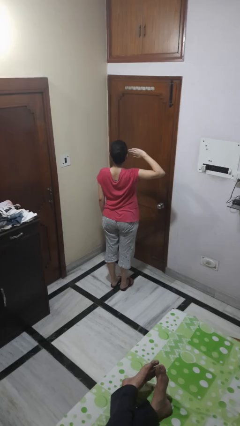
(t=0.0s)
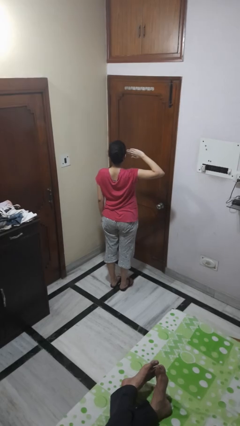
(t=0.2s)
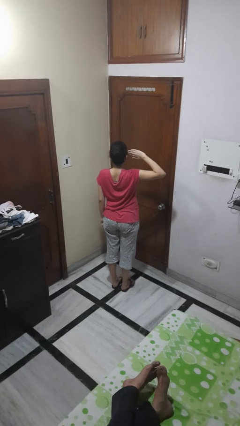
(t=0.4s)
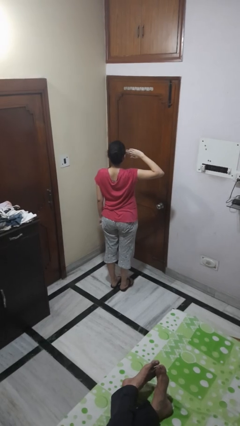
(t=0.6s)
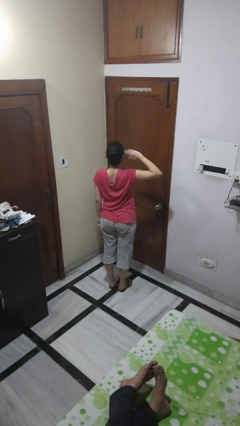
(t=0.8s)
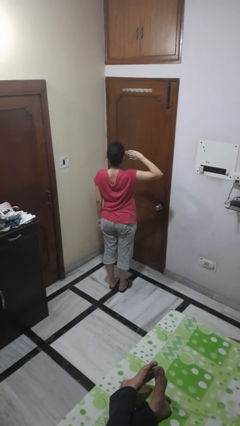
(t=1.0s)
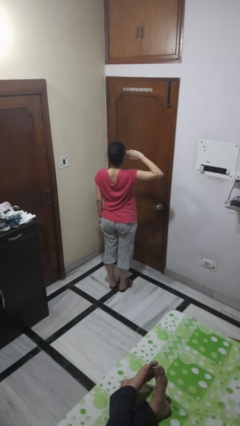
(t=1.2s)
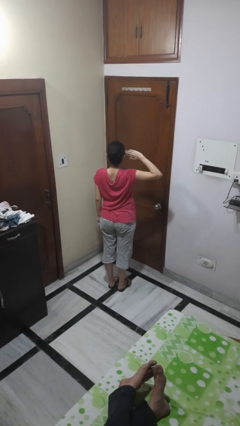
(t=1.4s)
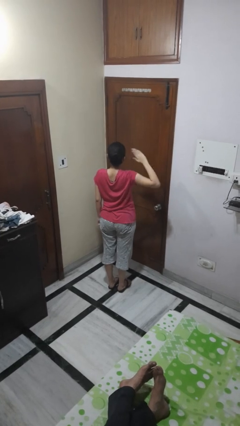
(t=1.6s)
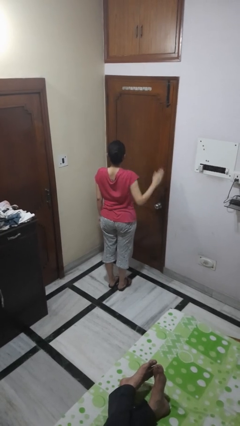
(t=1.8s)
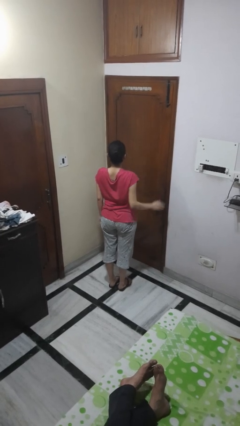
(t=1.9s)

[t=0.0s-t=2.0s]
person salutes

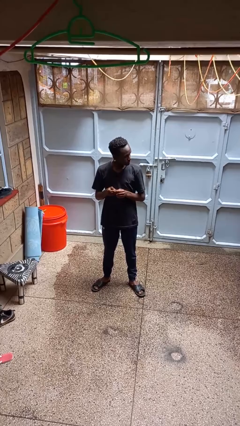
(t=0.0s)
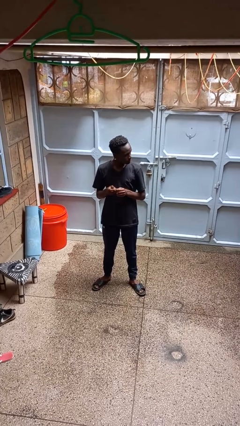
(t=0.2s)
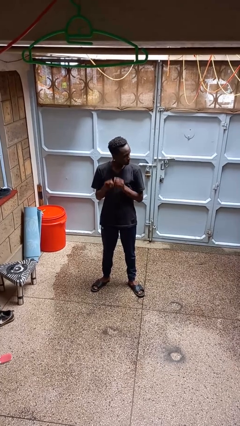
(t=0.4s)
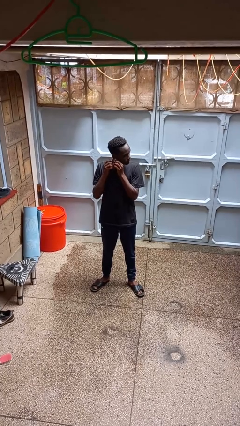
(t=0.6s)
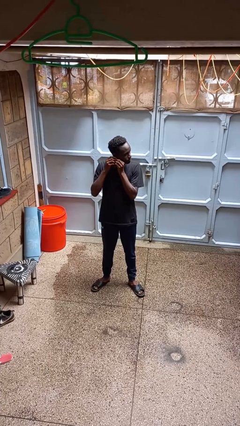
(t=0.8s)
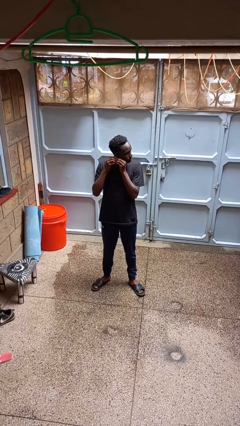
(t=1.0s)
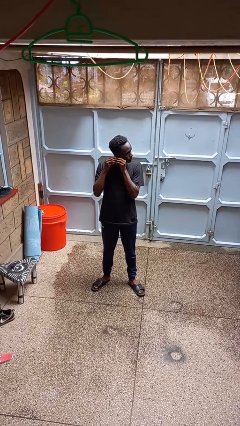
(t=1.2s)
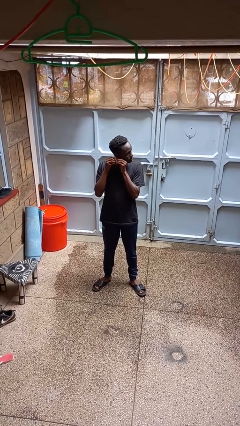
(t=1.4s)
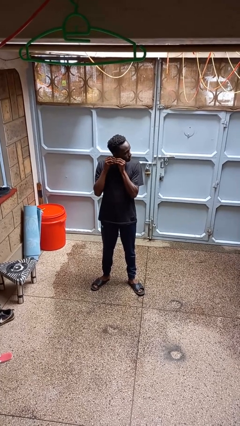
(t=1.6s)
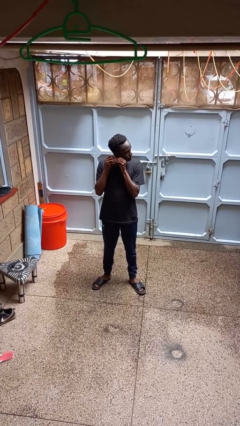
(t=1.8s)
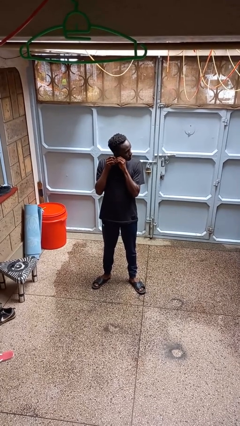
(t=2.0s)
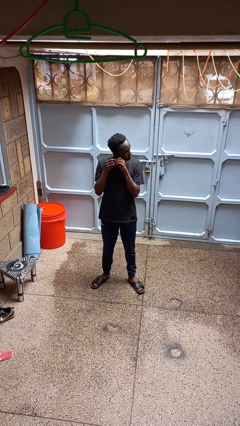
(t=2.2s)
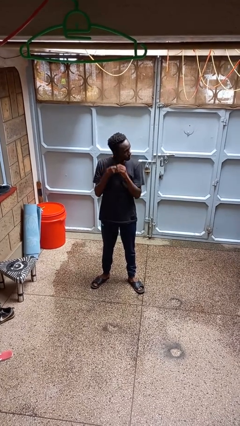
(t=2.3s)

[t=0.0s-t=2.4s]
person takes off earrings

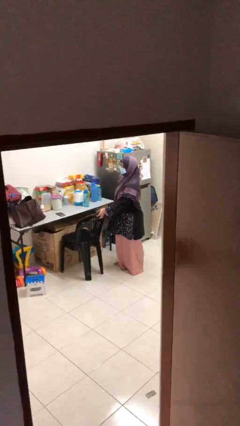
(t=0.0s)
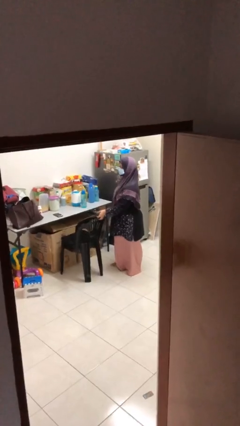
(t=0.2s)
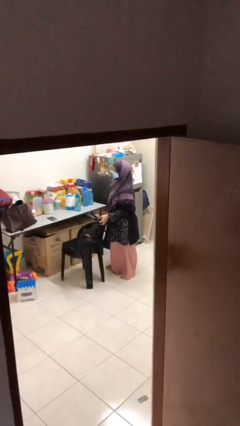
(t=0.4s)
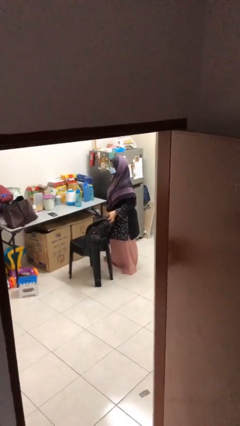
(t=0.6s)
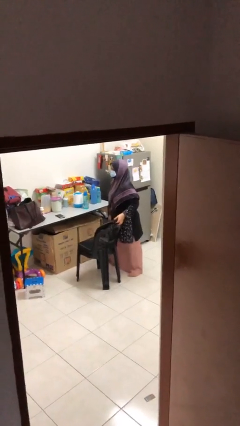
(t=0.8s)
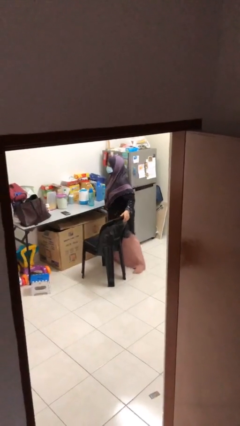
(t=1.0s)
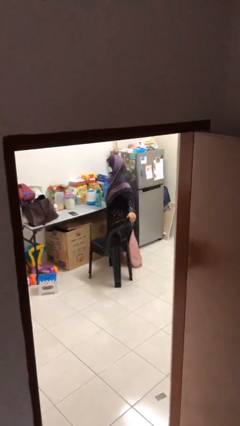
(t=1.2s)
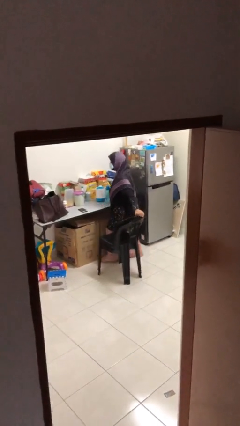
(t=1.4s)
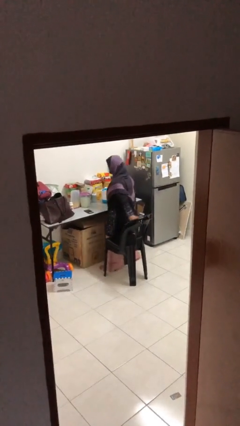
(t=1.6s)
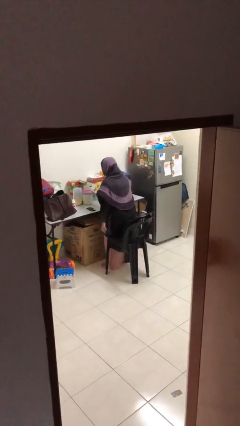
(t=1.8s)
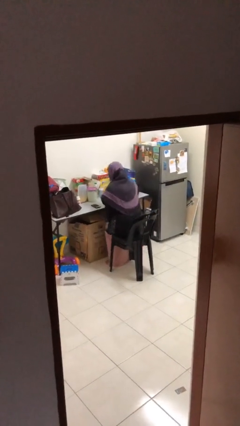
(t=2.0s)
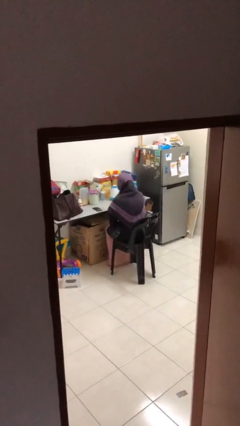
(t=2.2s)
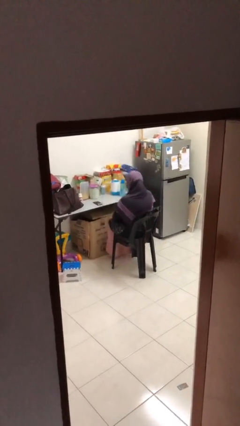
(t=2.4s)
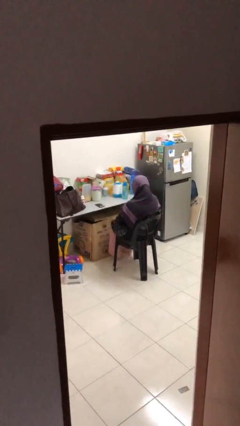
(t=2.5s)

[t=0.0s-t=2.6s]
person sits down

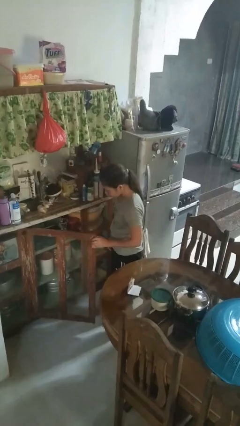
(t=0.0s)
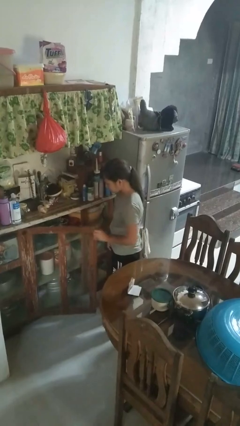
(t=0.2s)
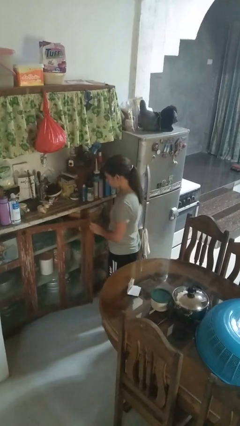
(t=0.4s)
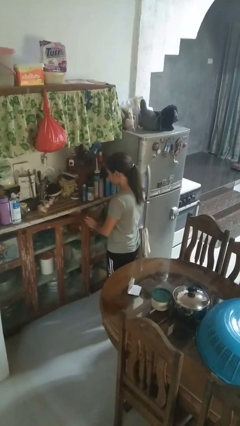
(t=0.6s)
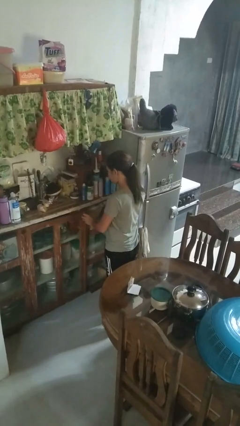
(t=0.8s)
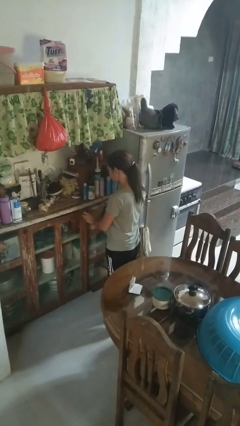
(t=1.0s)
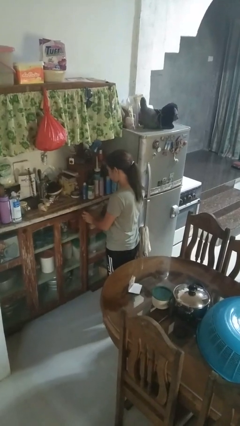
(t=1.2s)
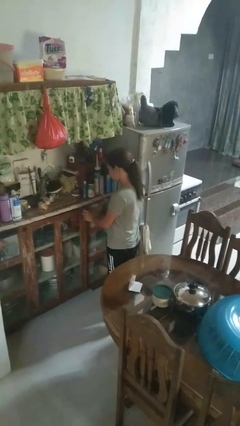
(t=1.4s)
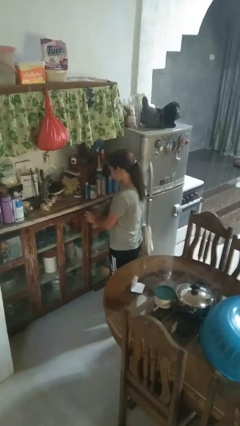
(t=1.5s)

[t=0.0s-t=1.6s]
person closes cabinet

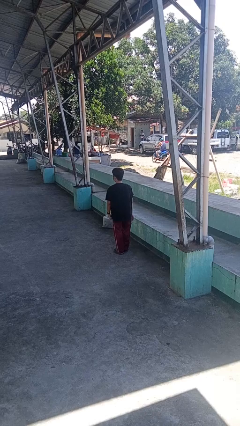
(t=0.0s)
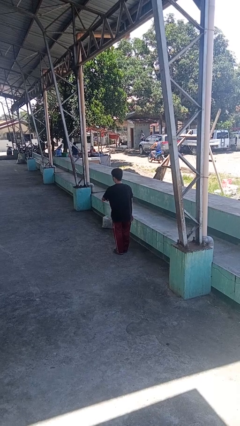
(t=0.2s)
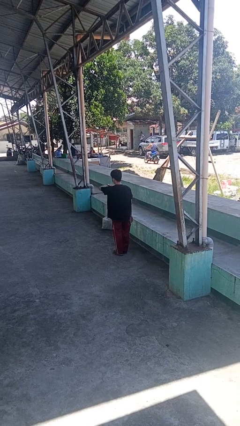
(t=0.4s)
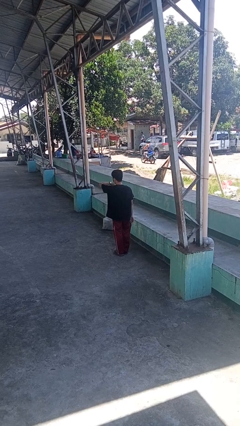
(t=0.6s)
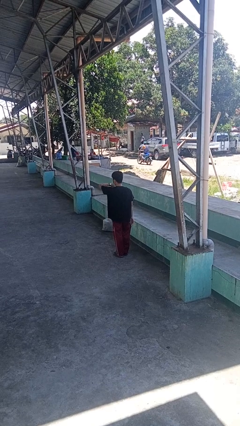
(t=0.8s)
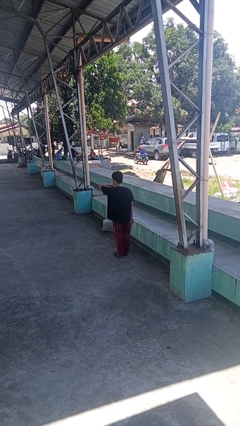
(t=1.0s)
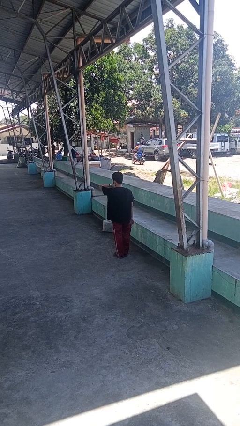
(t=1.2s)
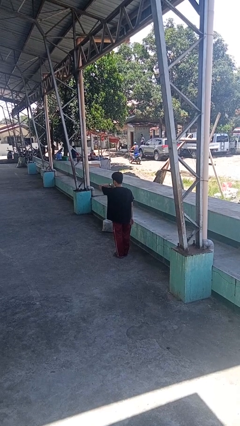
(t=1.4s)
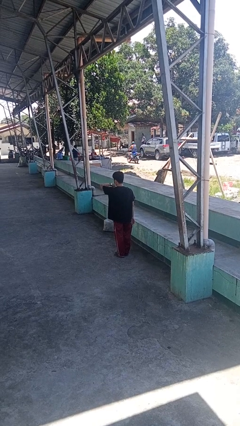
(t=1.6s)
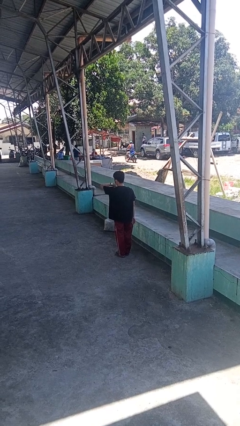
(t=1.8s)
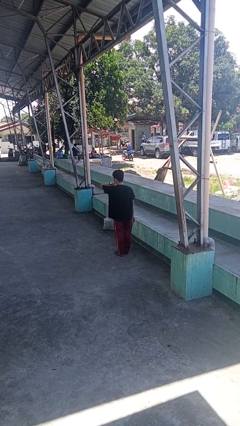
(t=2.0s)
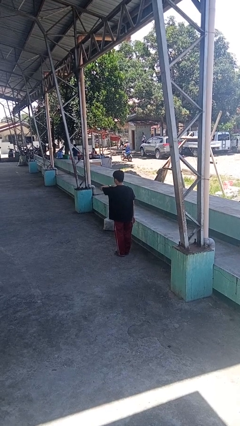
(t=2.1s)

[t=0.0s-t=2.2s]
person looks at wristwatch

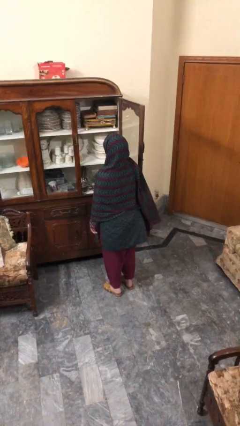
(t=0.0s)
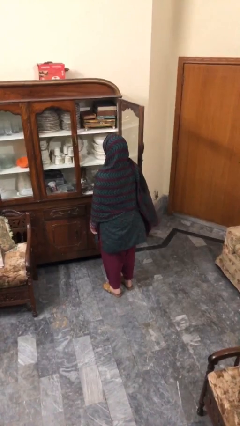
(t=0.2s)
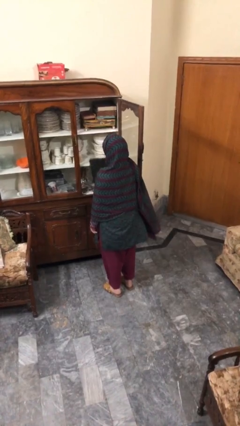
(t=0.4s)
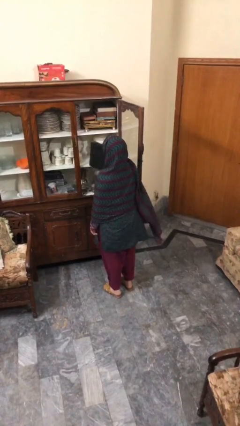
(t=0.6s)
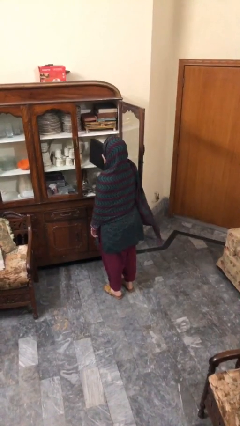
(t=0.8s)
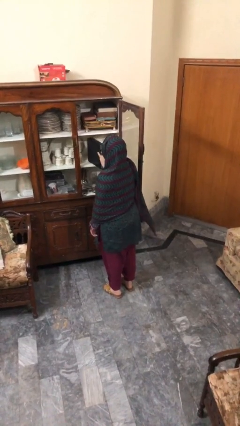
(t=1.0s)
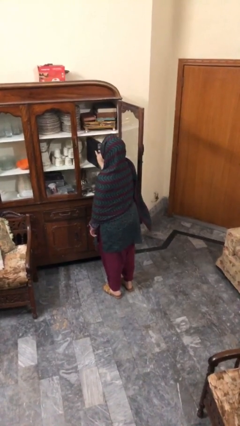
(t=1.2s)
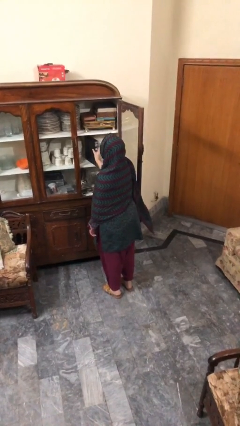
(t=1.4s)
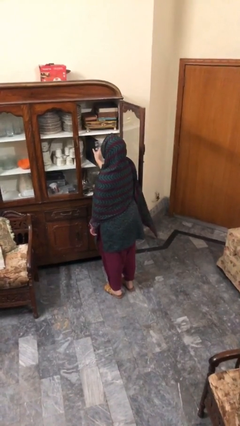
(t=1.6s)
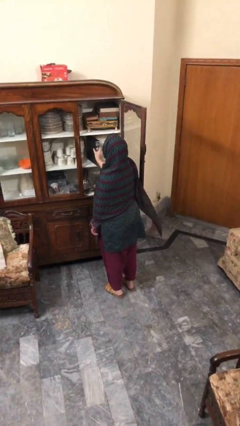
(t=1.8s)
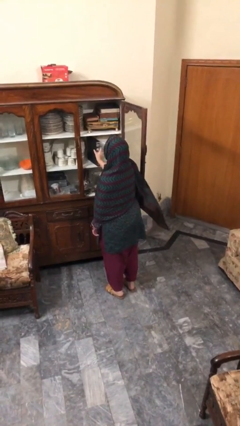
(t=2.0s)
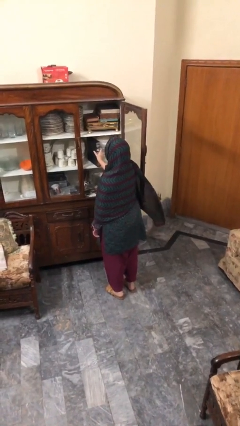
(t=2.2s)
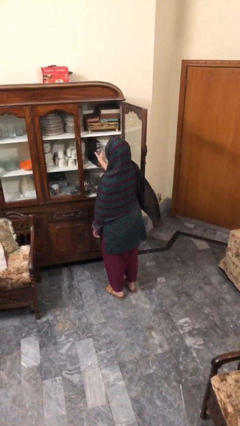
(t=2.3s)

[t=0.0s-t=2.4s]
person puts down object into cabinet

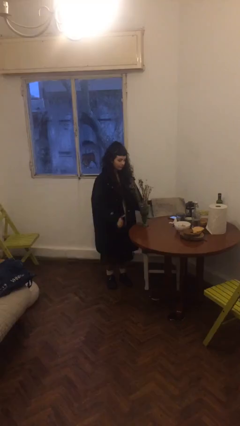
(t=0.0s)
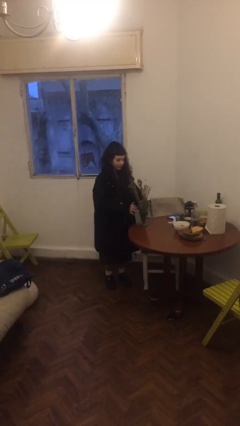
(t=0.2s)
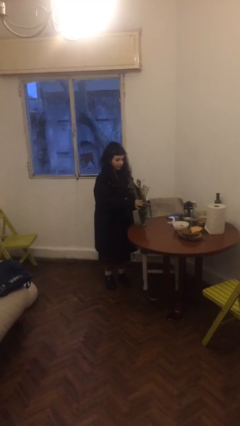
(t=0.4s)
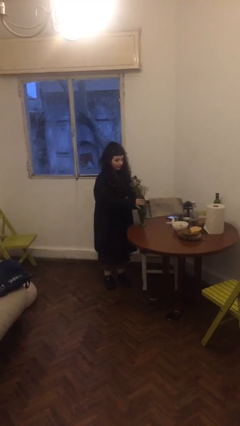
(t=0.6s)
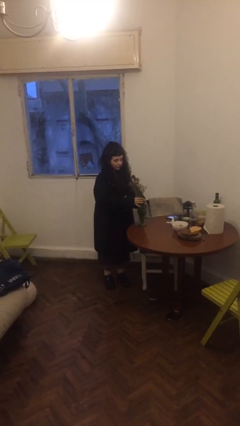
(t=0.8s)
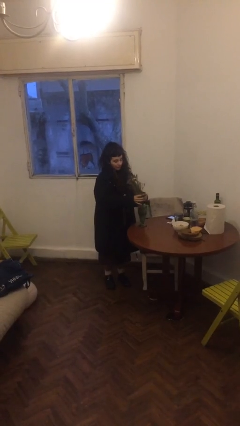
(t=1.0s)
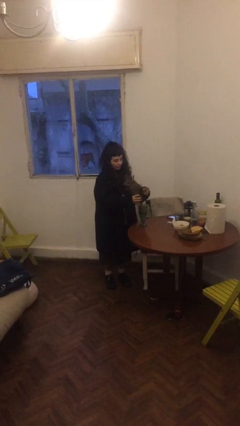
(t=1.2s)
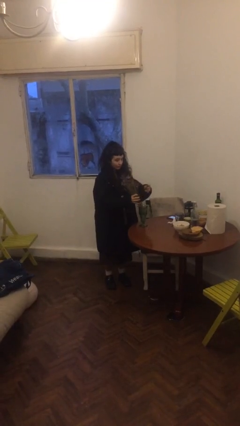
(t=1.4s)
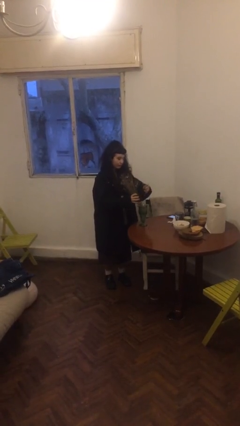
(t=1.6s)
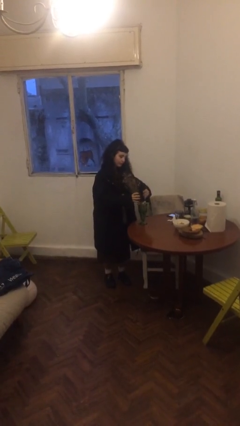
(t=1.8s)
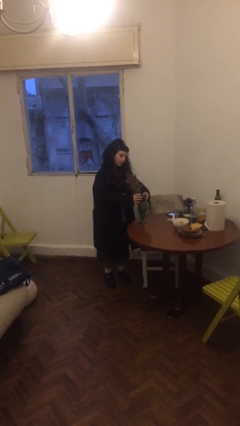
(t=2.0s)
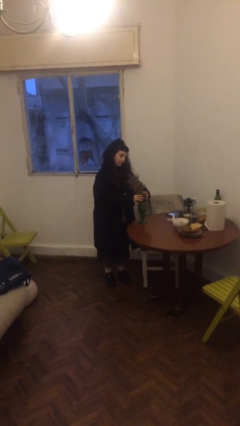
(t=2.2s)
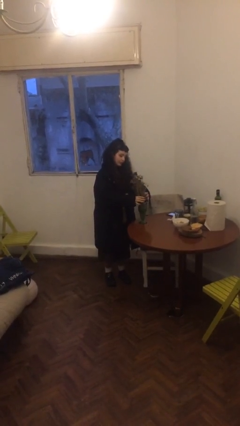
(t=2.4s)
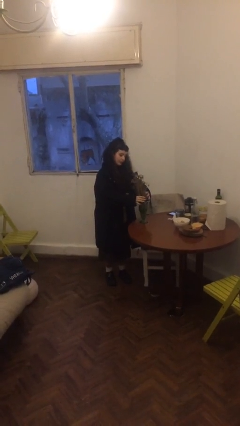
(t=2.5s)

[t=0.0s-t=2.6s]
person arranges flowers in vase

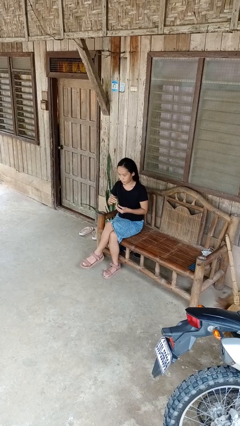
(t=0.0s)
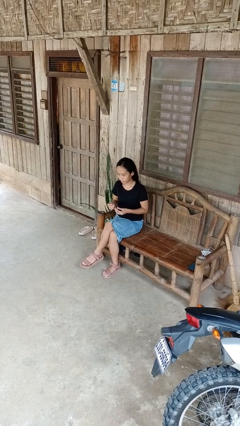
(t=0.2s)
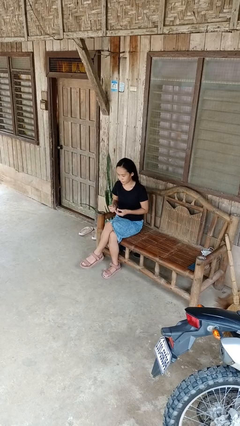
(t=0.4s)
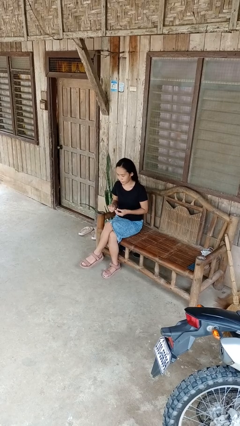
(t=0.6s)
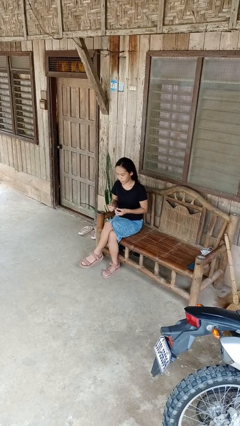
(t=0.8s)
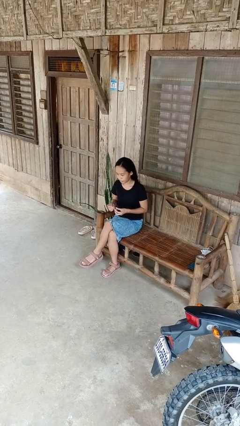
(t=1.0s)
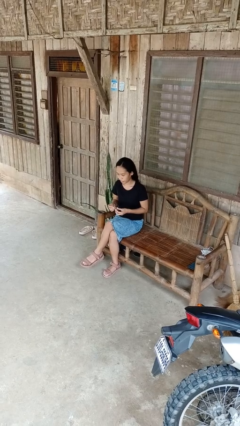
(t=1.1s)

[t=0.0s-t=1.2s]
person takes off ring
